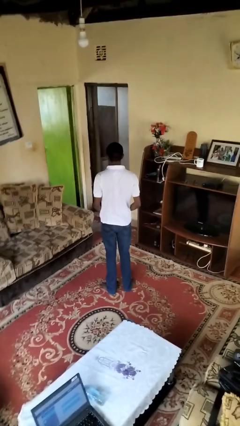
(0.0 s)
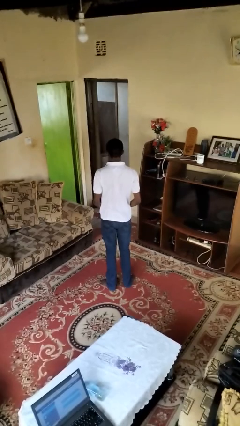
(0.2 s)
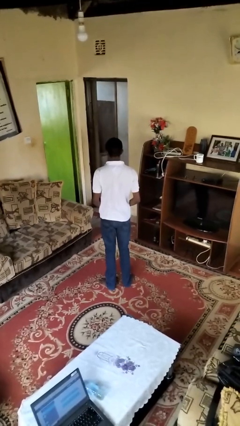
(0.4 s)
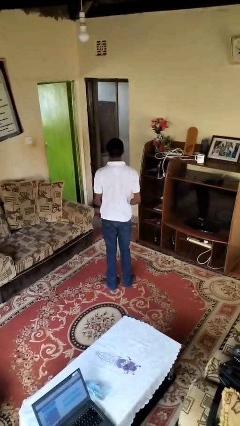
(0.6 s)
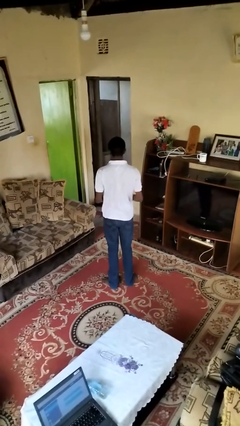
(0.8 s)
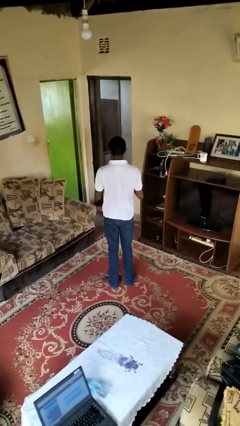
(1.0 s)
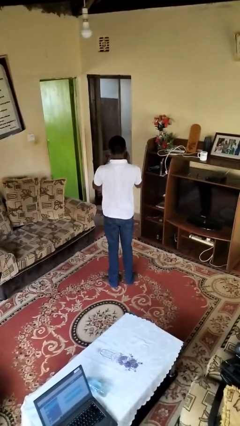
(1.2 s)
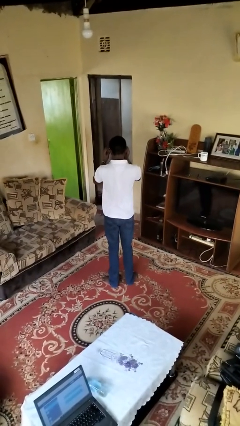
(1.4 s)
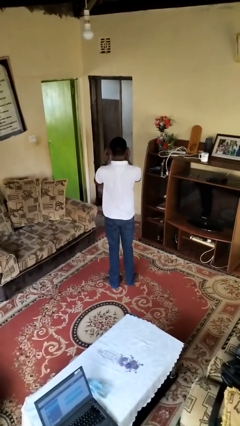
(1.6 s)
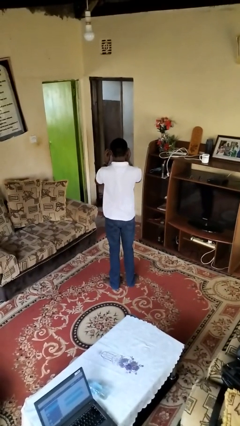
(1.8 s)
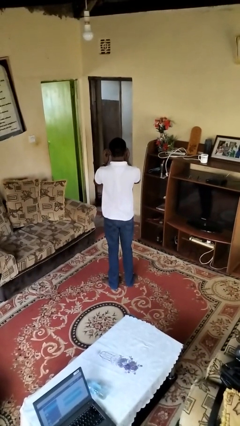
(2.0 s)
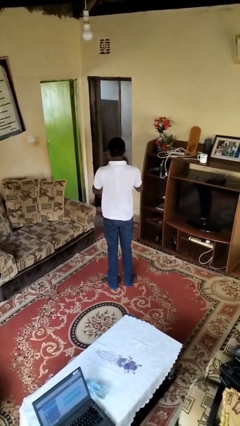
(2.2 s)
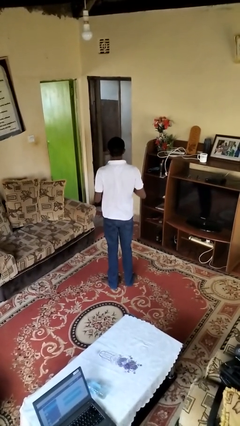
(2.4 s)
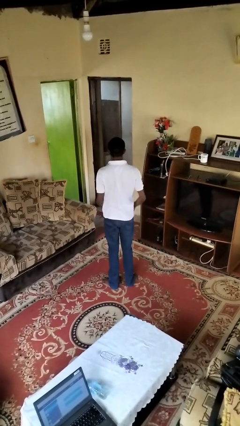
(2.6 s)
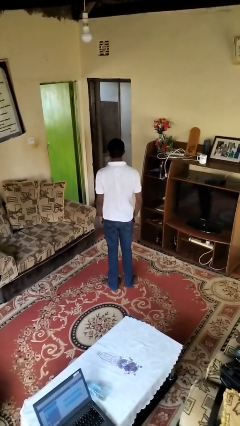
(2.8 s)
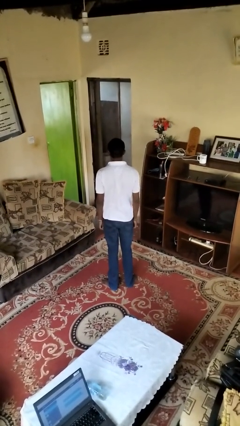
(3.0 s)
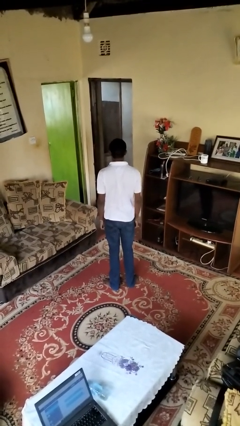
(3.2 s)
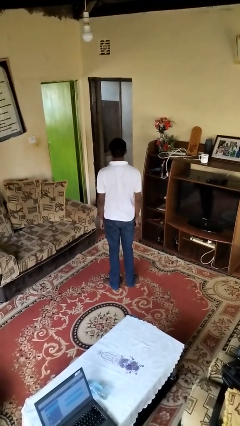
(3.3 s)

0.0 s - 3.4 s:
person puts on sunglasses

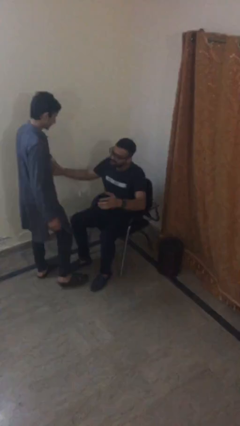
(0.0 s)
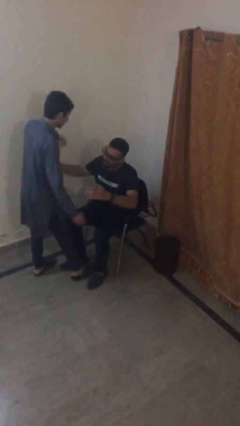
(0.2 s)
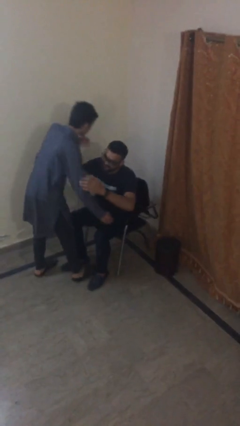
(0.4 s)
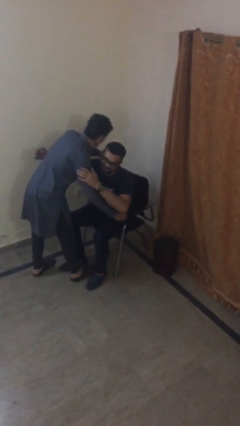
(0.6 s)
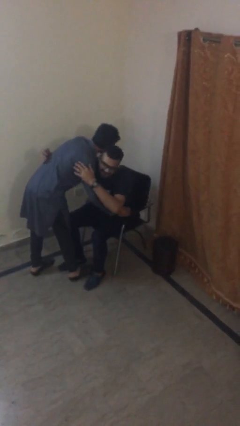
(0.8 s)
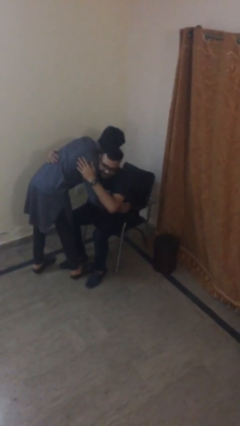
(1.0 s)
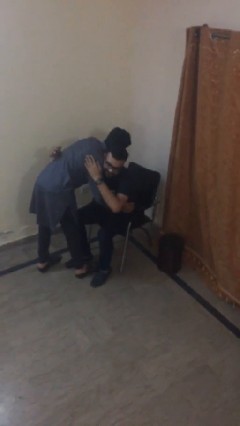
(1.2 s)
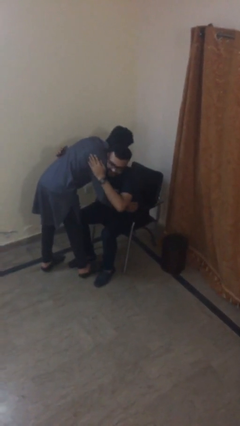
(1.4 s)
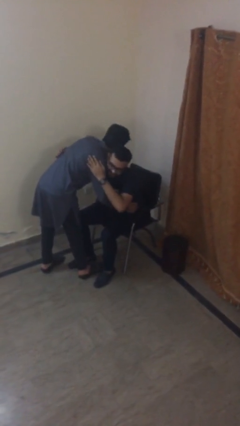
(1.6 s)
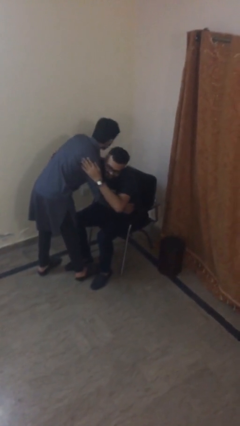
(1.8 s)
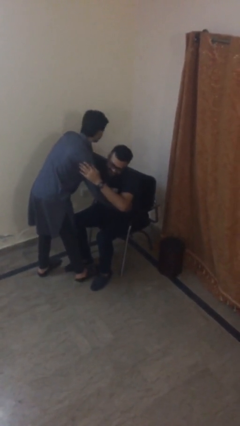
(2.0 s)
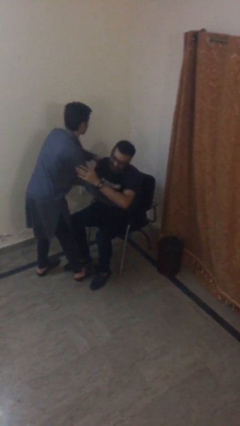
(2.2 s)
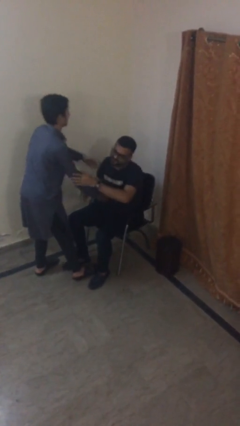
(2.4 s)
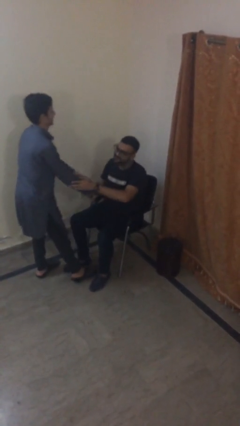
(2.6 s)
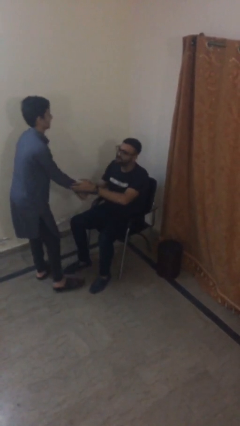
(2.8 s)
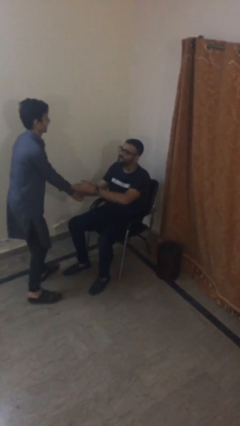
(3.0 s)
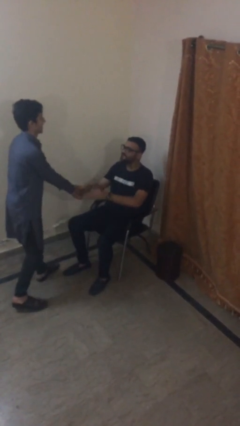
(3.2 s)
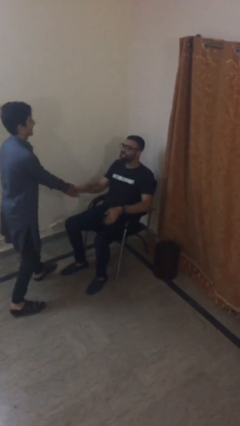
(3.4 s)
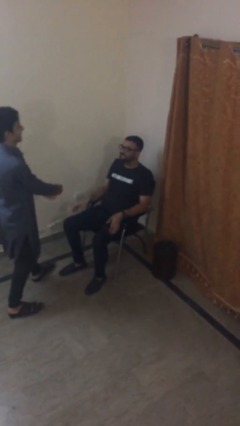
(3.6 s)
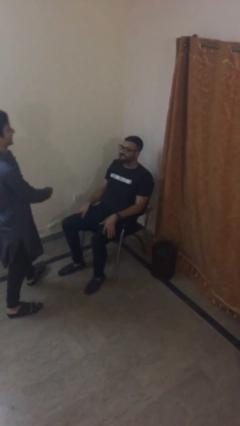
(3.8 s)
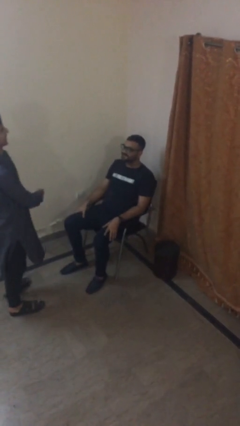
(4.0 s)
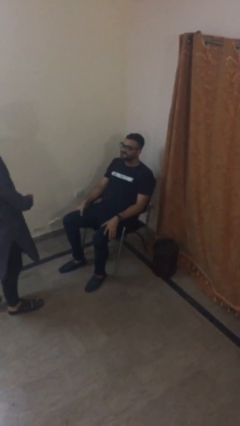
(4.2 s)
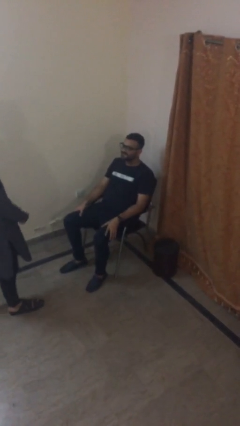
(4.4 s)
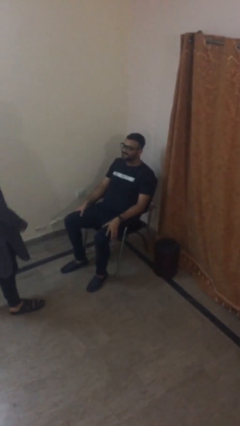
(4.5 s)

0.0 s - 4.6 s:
person embraces person

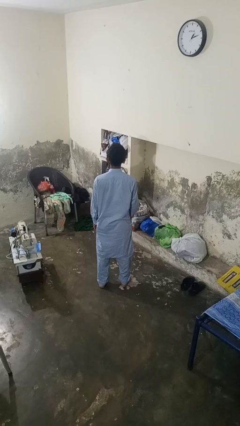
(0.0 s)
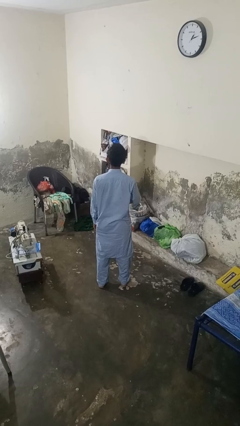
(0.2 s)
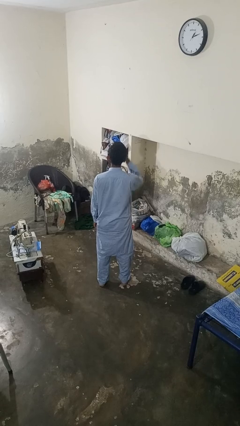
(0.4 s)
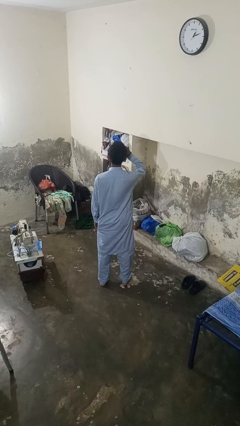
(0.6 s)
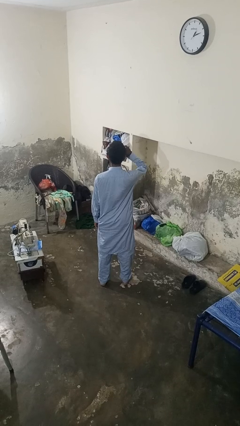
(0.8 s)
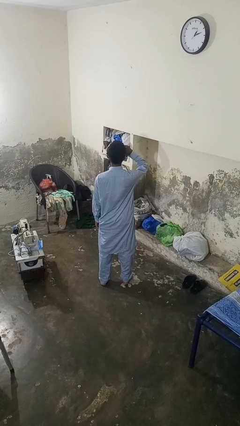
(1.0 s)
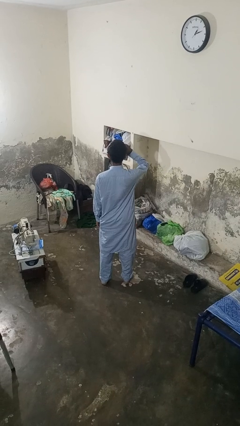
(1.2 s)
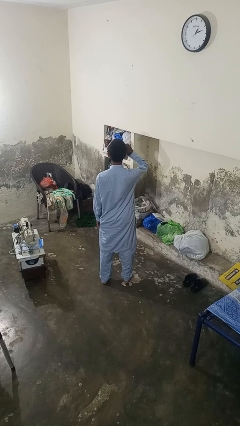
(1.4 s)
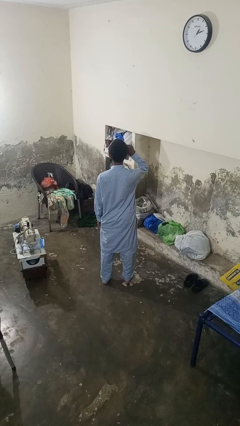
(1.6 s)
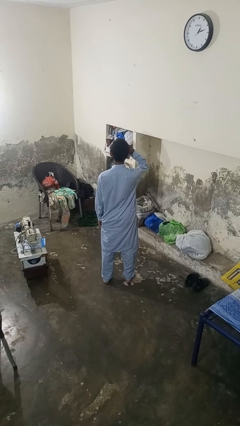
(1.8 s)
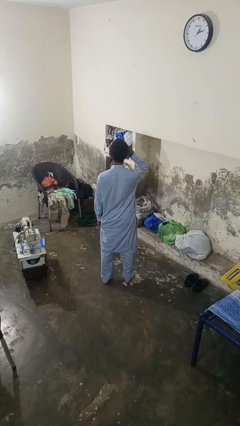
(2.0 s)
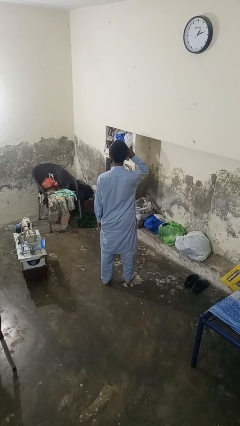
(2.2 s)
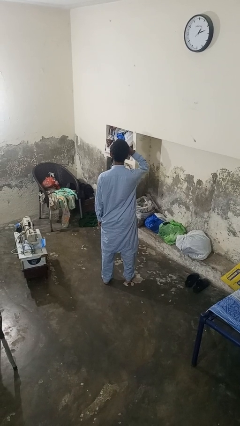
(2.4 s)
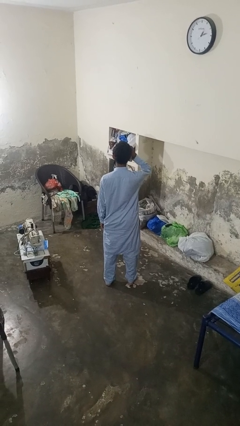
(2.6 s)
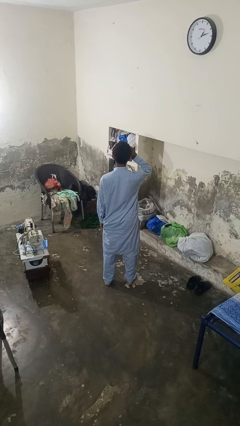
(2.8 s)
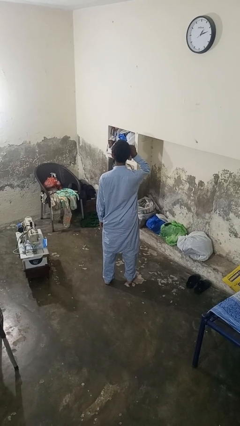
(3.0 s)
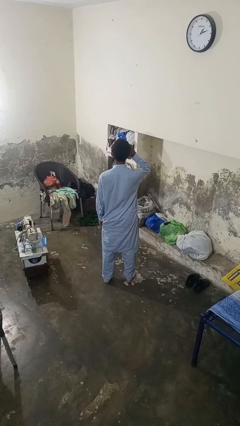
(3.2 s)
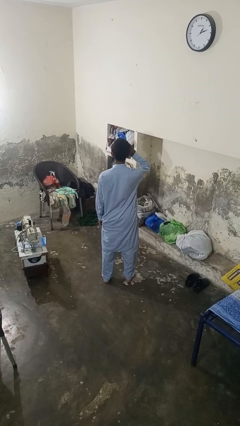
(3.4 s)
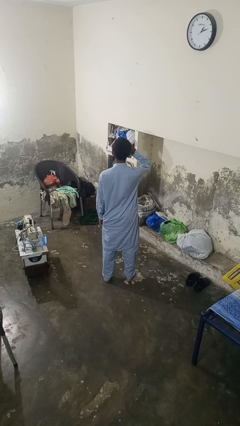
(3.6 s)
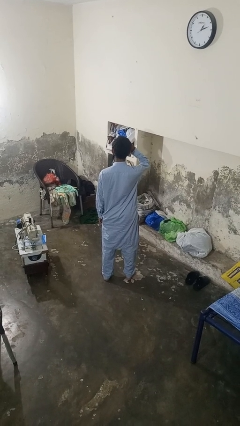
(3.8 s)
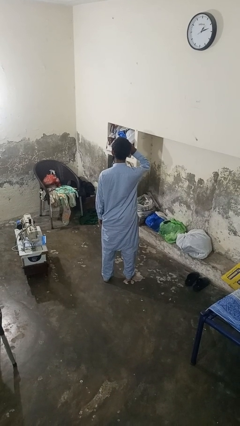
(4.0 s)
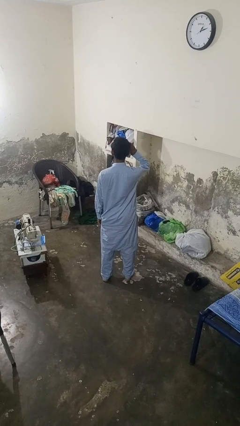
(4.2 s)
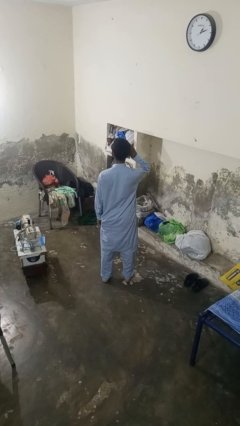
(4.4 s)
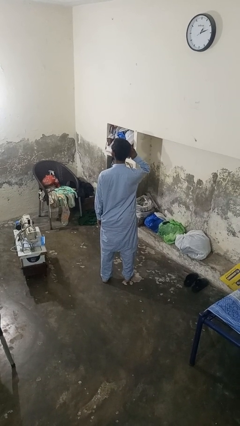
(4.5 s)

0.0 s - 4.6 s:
person rubs eyes

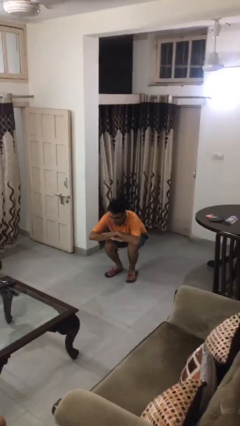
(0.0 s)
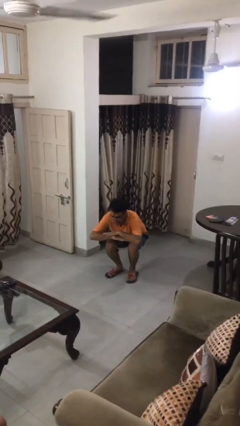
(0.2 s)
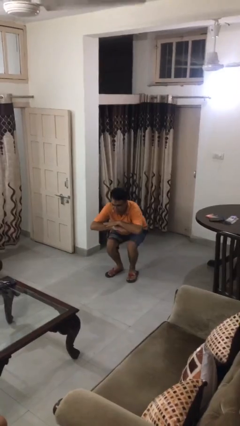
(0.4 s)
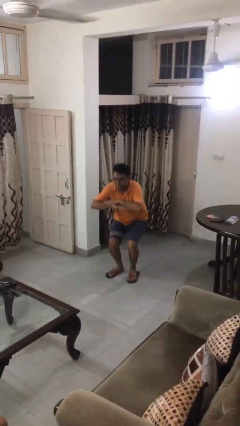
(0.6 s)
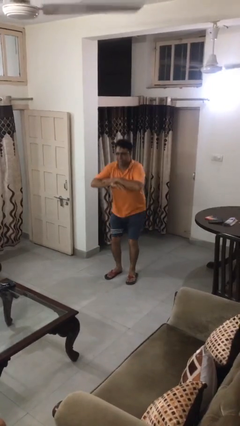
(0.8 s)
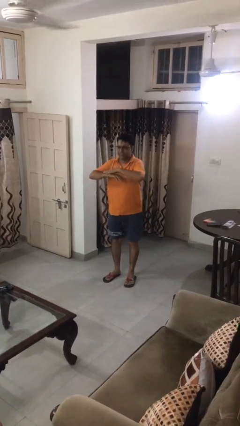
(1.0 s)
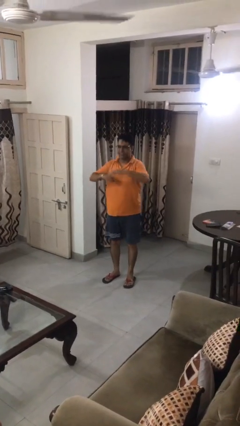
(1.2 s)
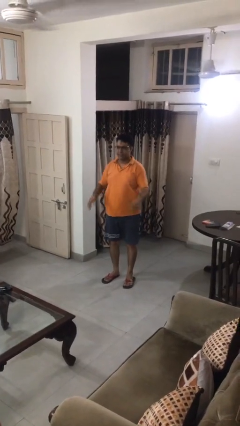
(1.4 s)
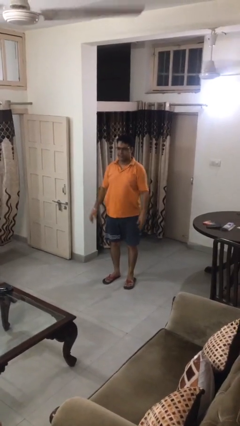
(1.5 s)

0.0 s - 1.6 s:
person stands up

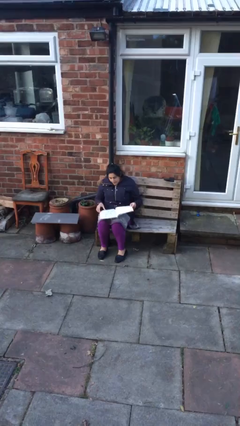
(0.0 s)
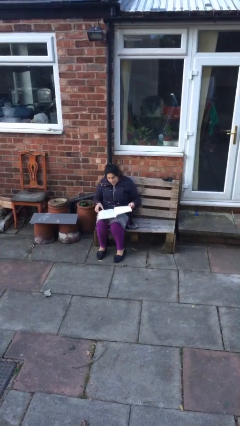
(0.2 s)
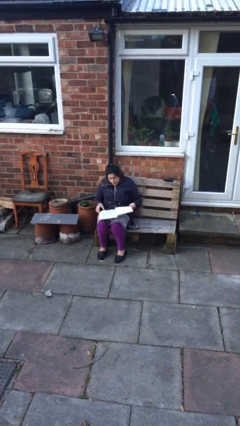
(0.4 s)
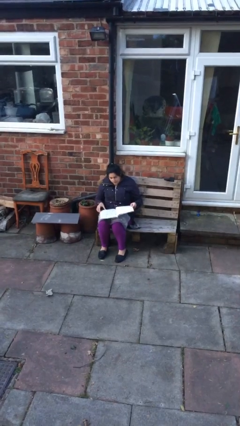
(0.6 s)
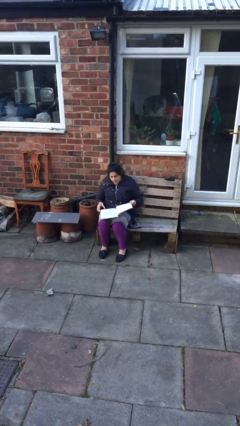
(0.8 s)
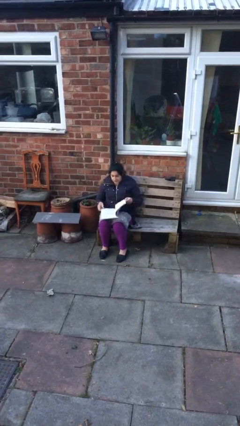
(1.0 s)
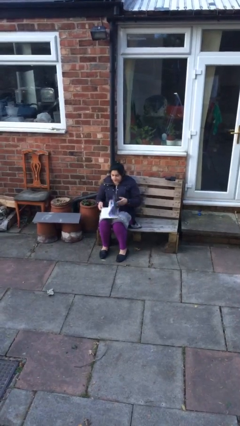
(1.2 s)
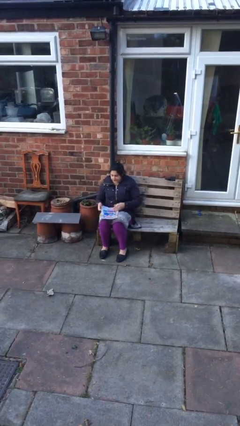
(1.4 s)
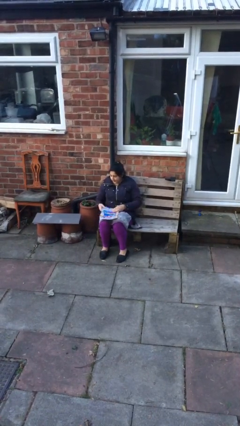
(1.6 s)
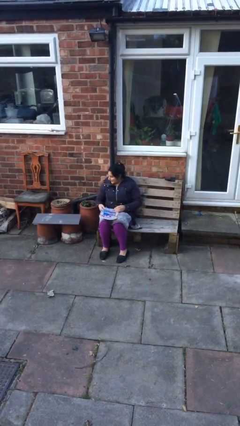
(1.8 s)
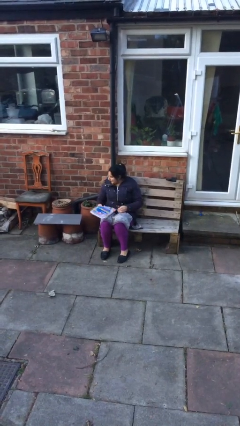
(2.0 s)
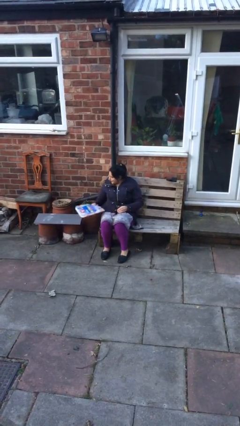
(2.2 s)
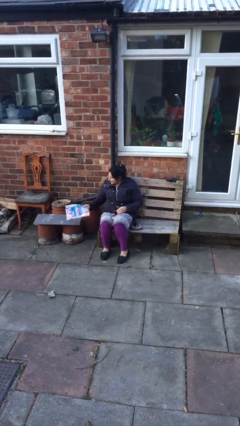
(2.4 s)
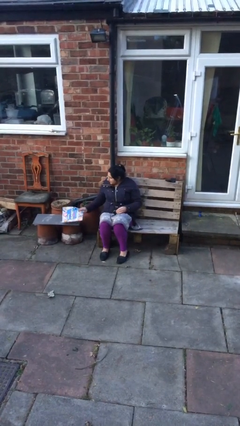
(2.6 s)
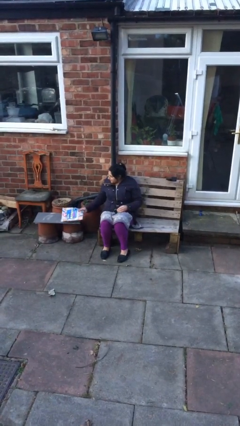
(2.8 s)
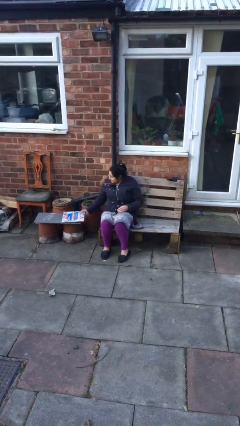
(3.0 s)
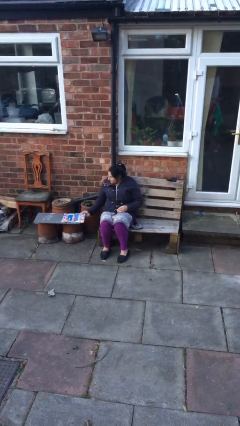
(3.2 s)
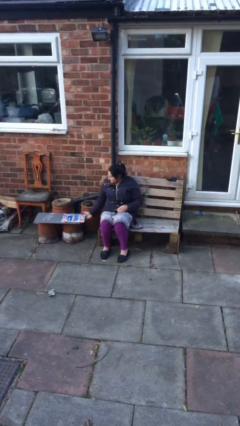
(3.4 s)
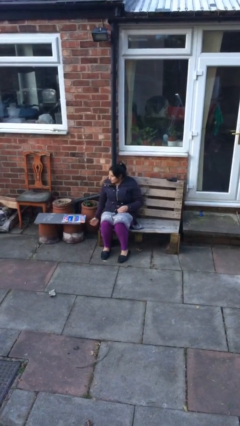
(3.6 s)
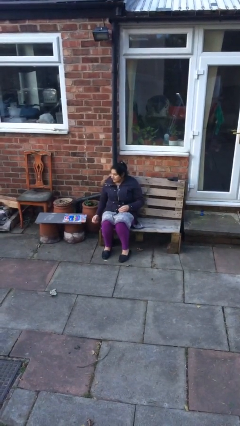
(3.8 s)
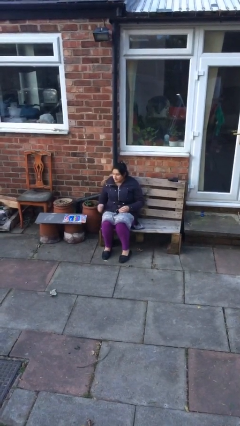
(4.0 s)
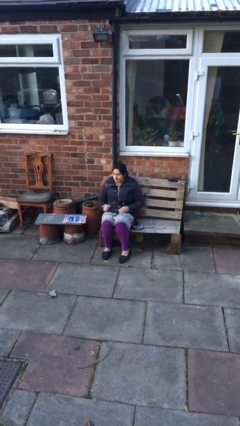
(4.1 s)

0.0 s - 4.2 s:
person puts down object on table
